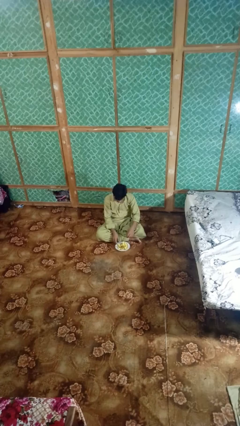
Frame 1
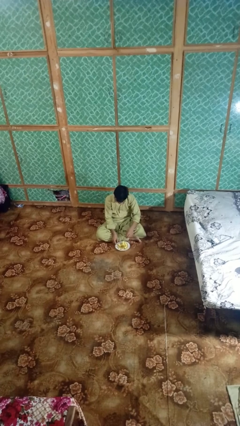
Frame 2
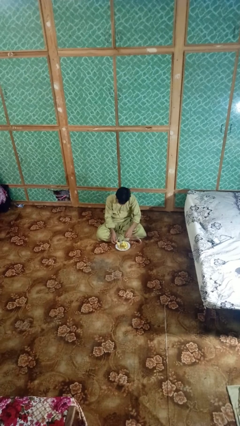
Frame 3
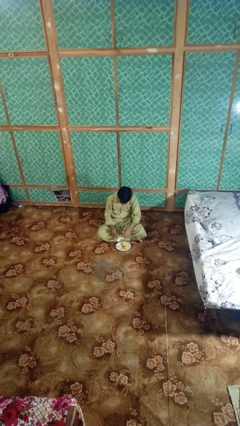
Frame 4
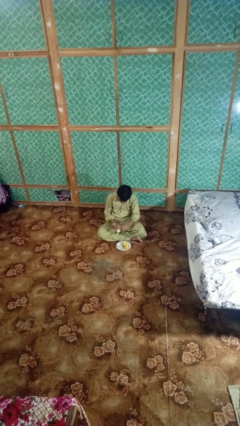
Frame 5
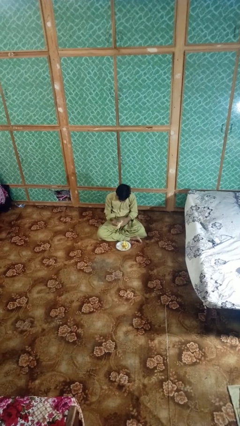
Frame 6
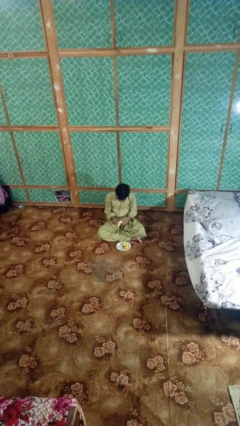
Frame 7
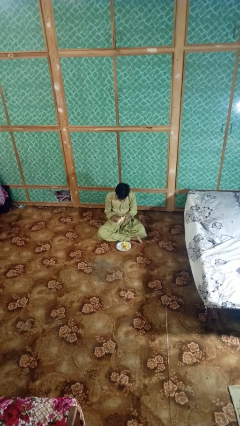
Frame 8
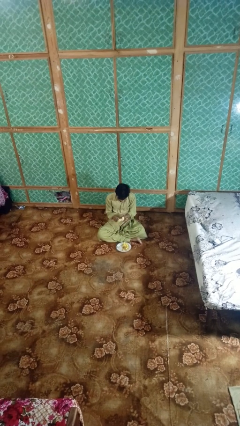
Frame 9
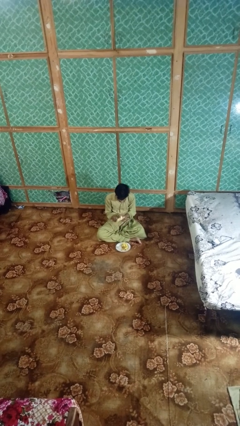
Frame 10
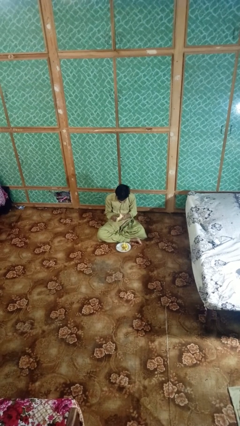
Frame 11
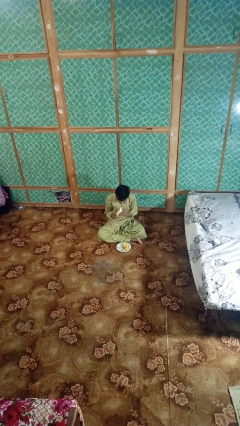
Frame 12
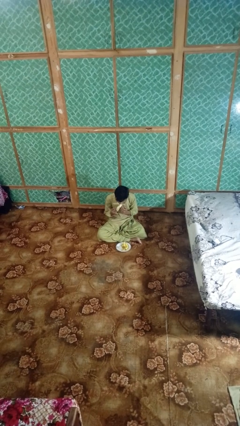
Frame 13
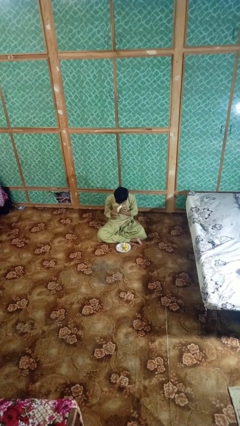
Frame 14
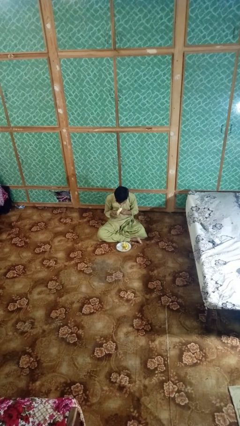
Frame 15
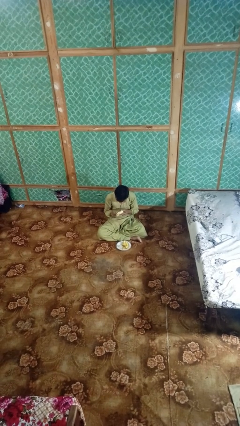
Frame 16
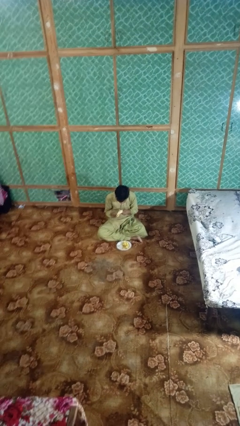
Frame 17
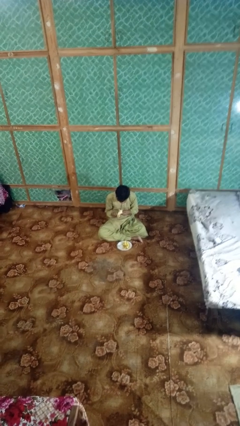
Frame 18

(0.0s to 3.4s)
person eats banana

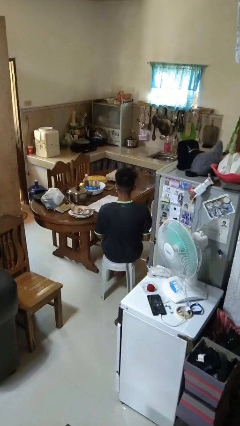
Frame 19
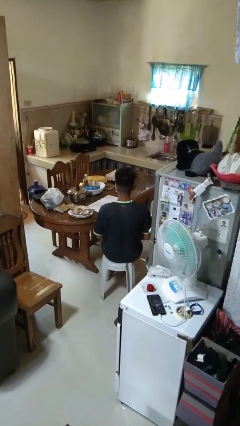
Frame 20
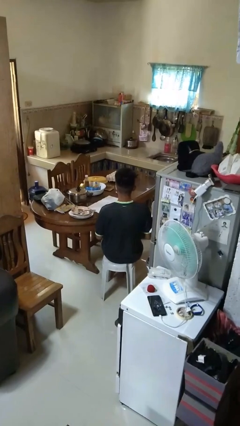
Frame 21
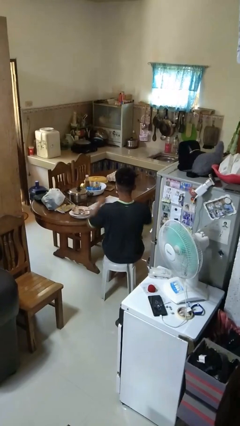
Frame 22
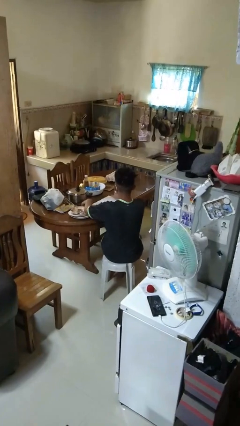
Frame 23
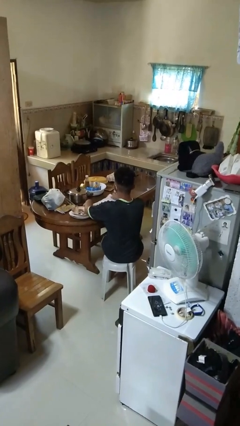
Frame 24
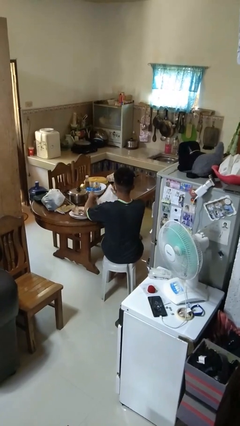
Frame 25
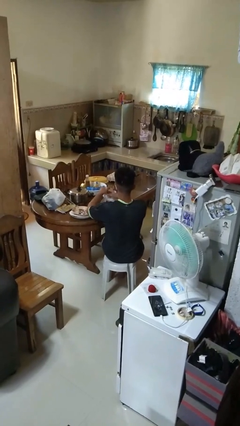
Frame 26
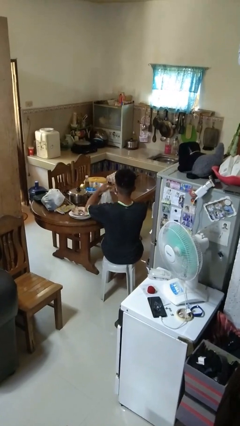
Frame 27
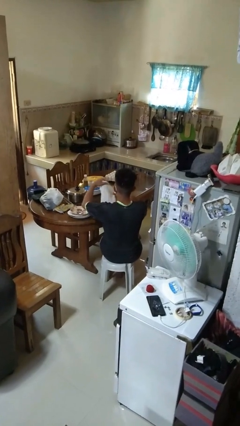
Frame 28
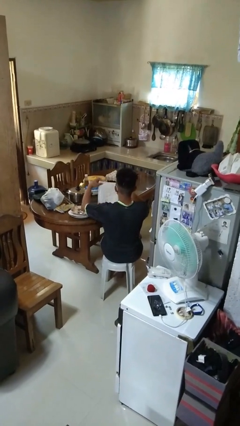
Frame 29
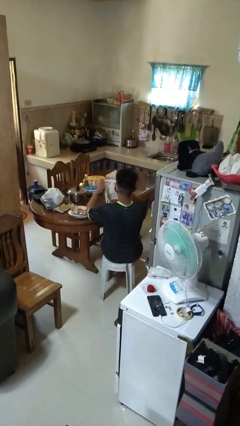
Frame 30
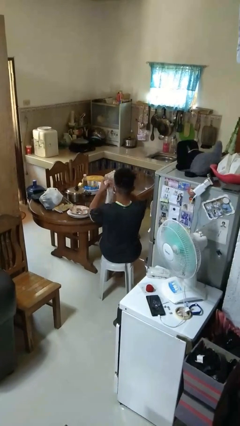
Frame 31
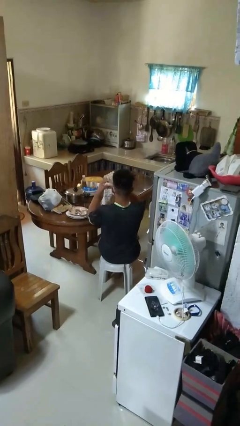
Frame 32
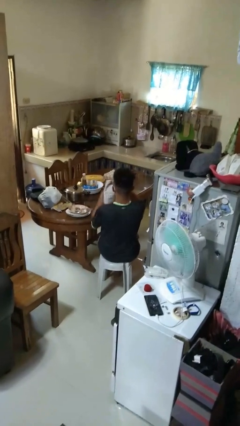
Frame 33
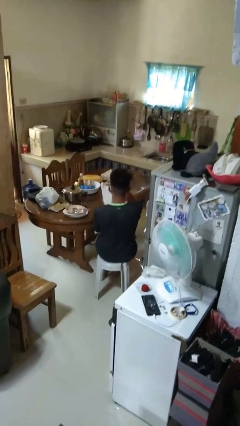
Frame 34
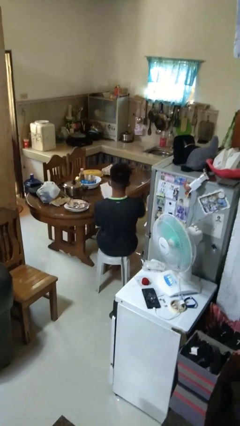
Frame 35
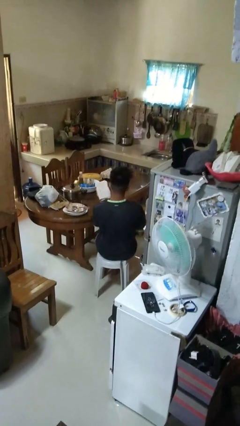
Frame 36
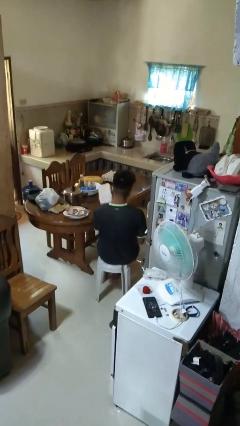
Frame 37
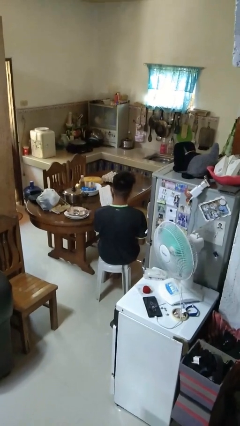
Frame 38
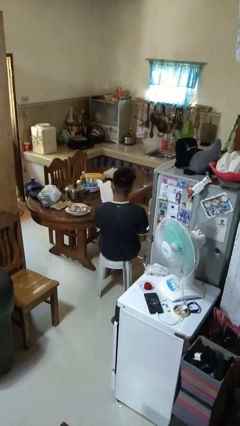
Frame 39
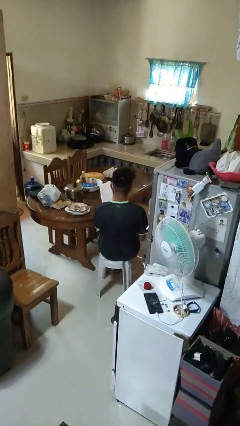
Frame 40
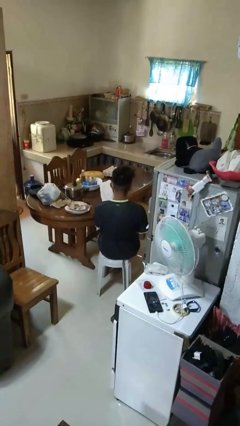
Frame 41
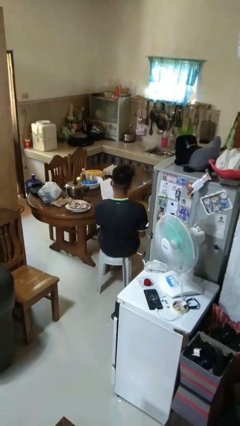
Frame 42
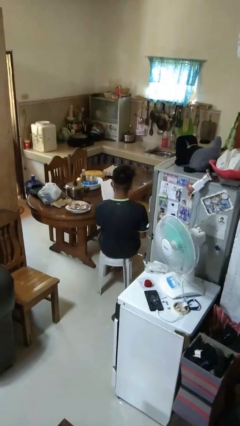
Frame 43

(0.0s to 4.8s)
person folds tablecloth

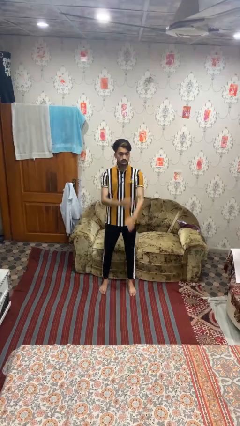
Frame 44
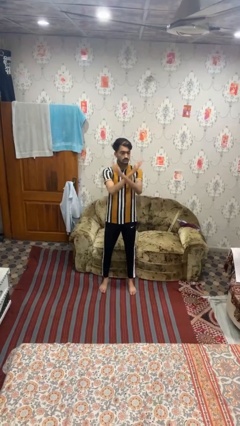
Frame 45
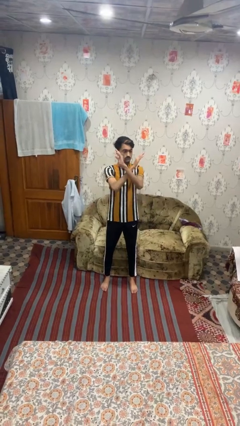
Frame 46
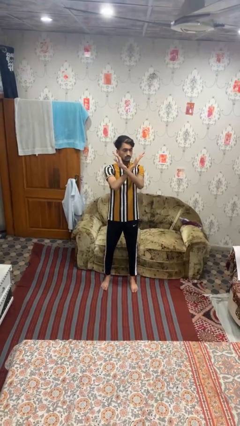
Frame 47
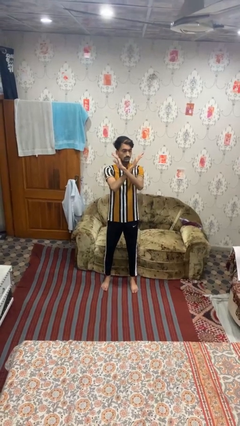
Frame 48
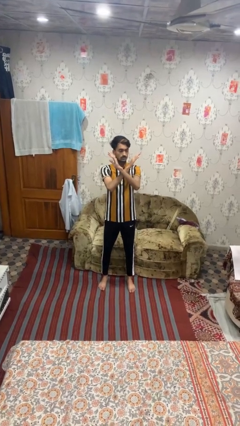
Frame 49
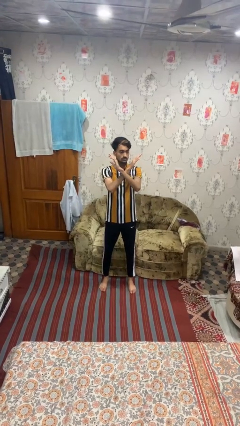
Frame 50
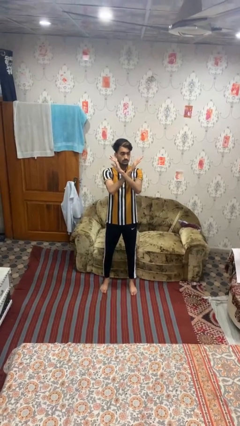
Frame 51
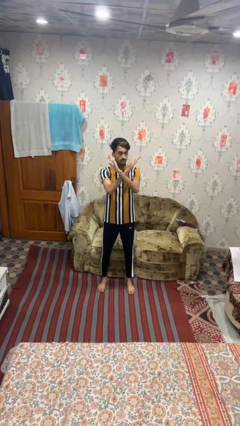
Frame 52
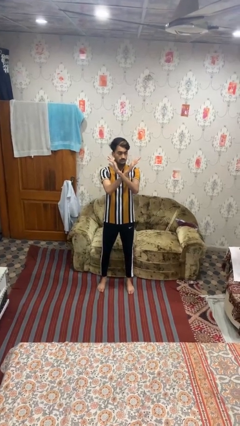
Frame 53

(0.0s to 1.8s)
person gestures arms x

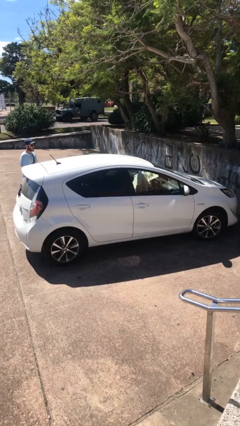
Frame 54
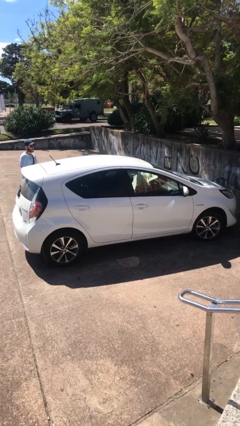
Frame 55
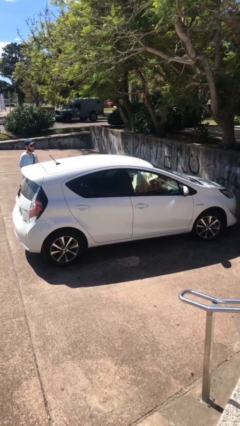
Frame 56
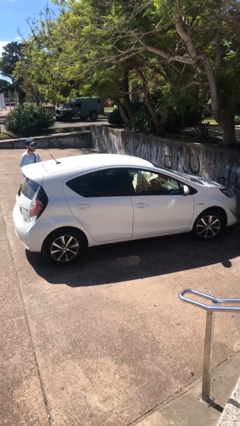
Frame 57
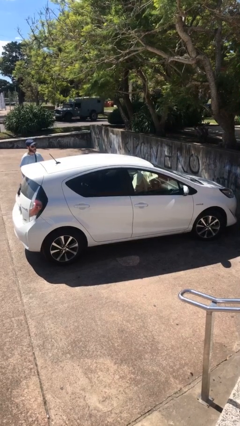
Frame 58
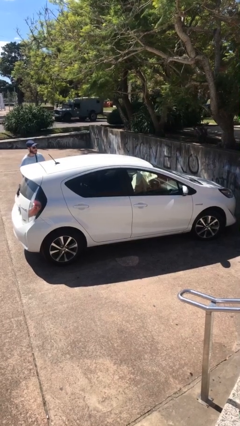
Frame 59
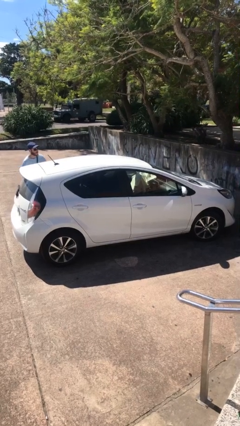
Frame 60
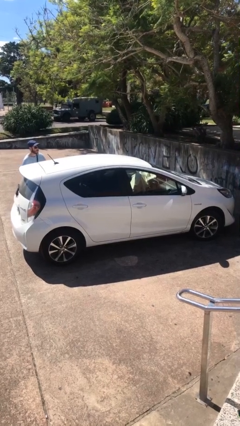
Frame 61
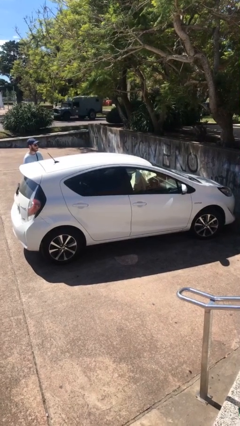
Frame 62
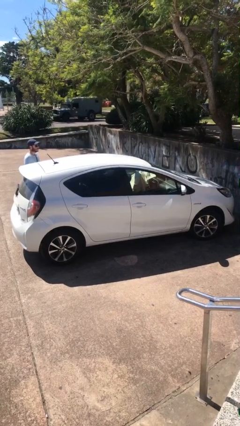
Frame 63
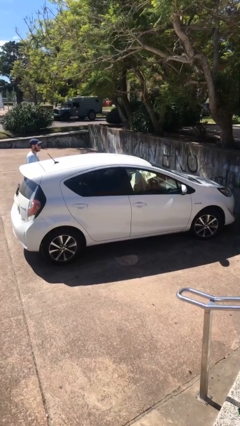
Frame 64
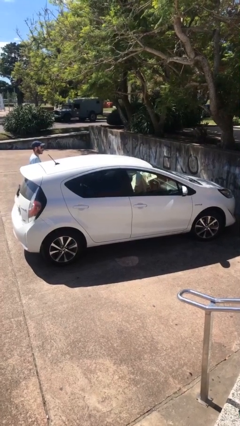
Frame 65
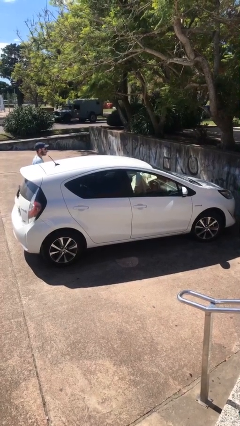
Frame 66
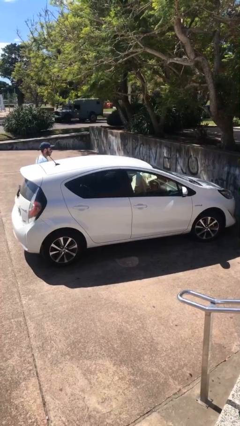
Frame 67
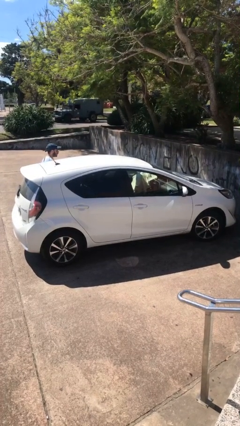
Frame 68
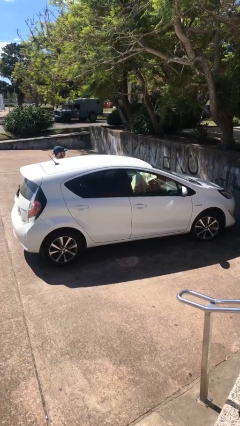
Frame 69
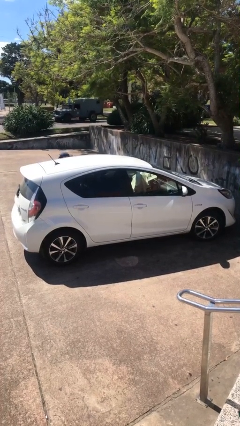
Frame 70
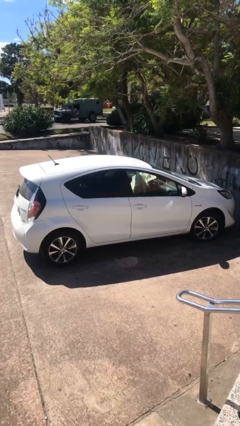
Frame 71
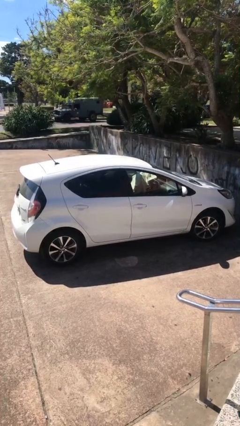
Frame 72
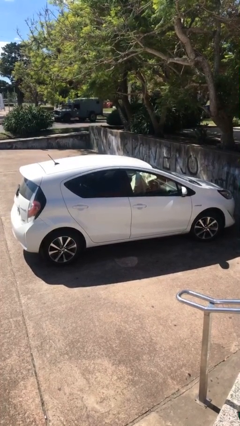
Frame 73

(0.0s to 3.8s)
car picks up person

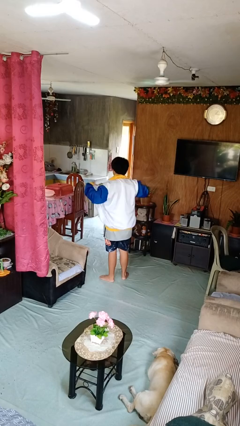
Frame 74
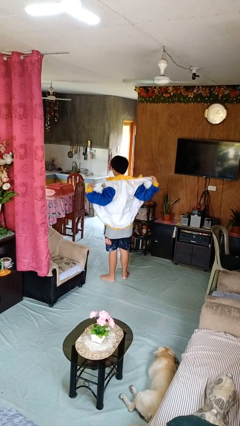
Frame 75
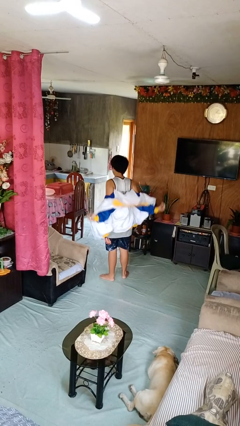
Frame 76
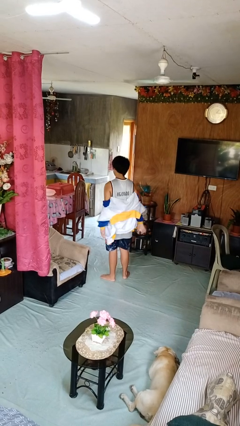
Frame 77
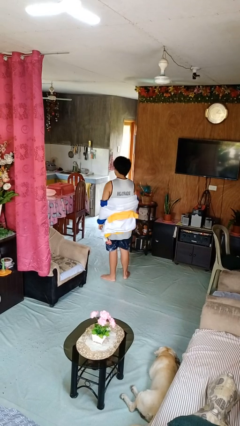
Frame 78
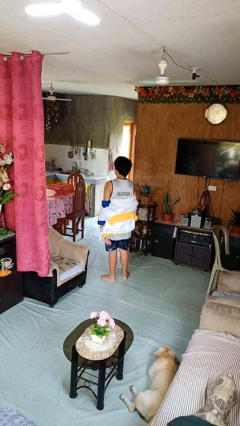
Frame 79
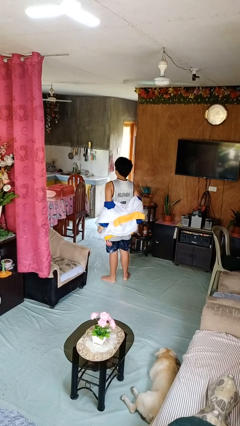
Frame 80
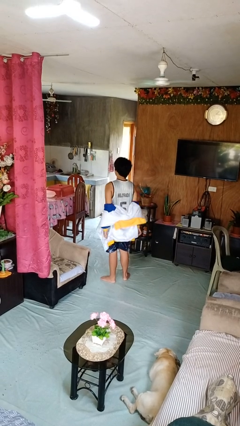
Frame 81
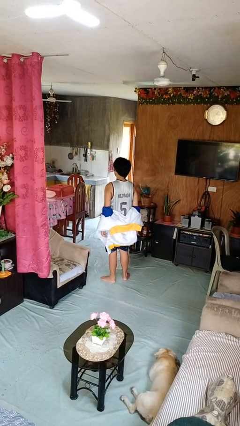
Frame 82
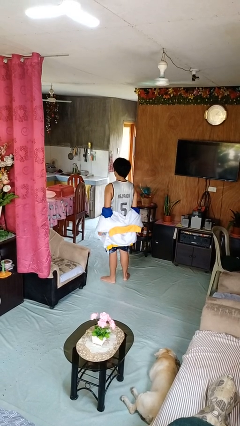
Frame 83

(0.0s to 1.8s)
person takes off jacket

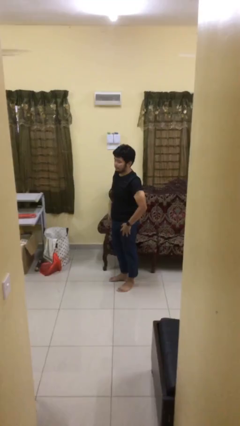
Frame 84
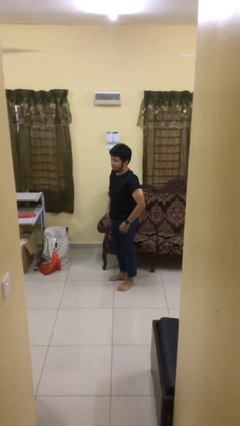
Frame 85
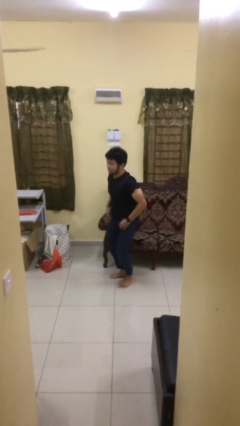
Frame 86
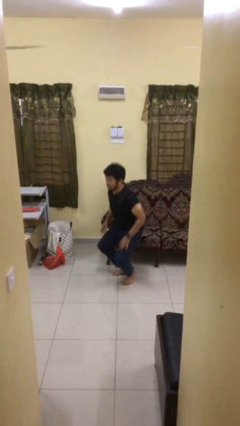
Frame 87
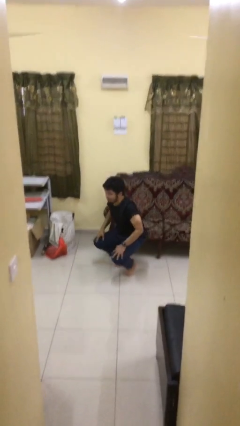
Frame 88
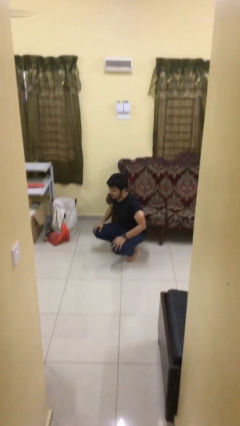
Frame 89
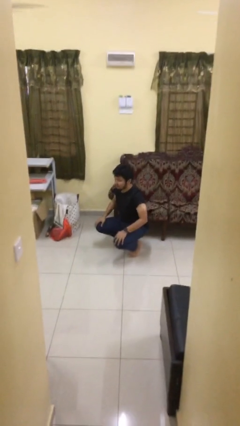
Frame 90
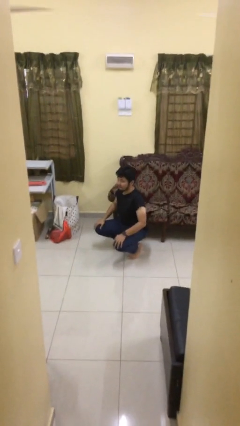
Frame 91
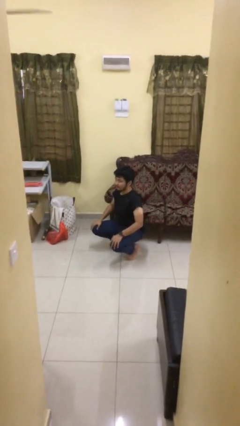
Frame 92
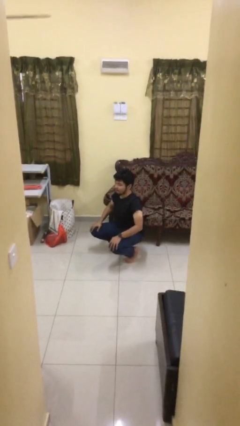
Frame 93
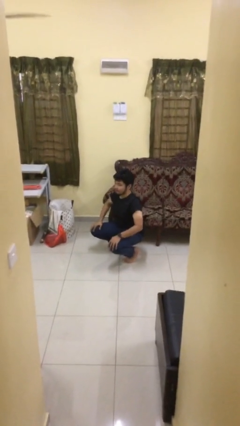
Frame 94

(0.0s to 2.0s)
person squats
